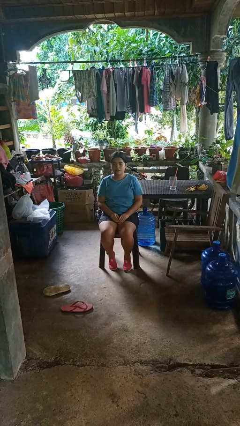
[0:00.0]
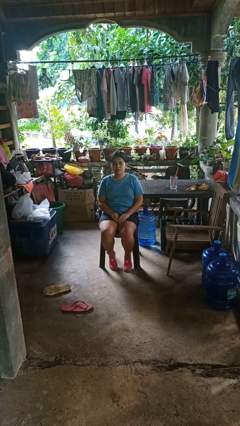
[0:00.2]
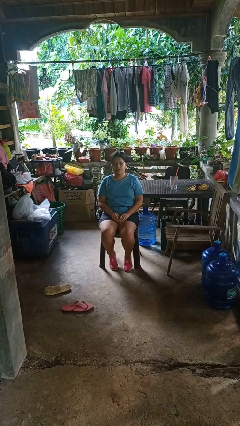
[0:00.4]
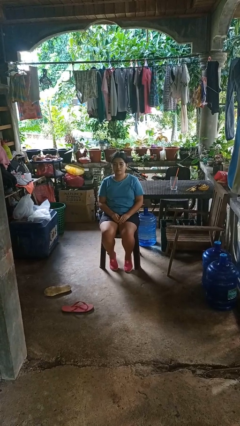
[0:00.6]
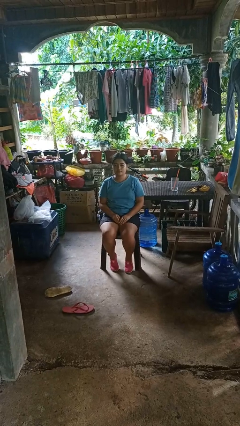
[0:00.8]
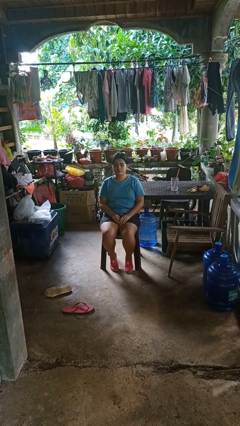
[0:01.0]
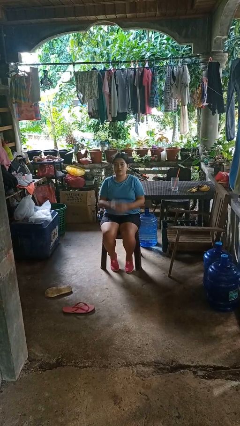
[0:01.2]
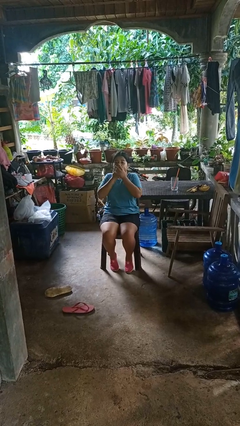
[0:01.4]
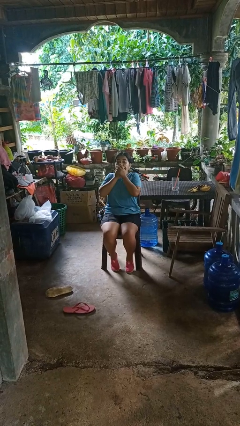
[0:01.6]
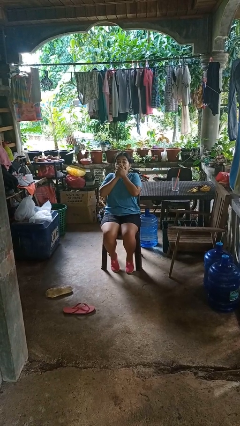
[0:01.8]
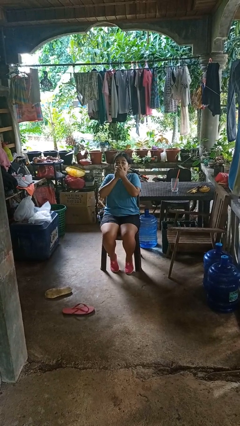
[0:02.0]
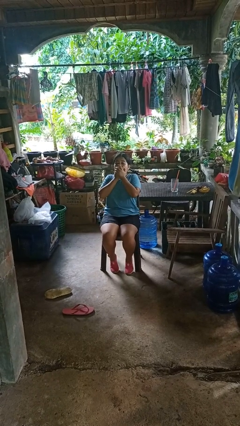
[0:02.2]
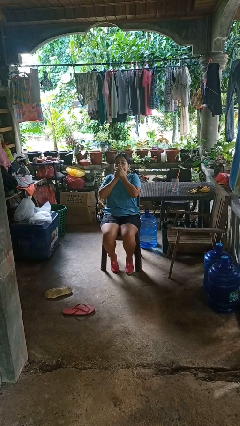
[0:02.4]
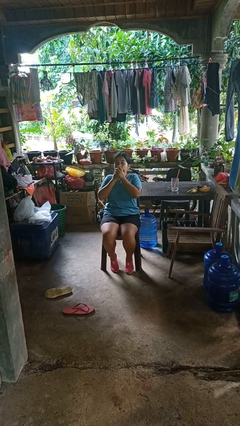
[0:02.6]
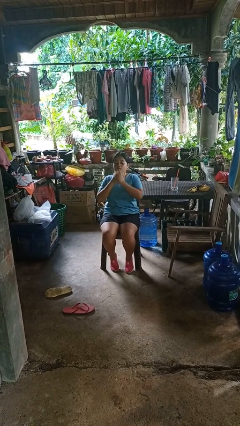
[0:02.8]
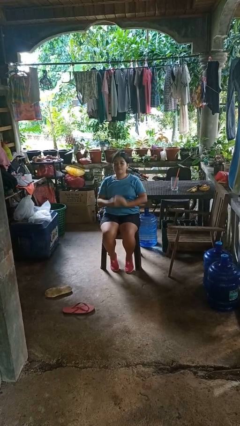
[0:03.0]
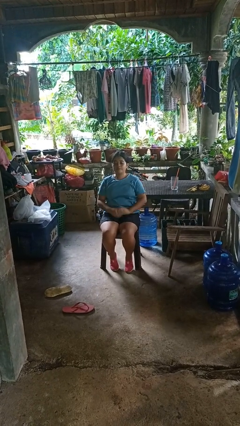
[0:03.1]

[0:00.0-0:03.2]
person covers face with hands

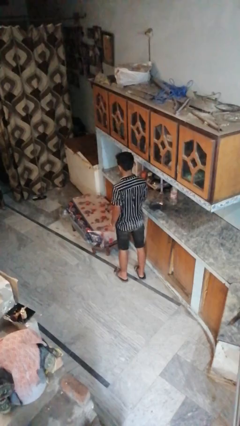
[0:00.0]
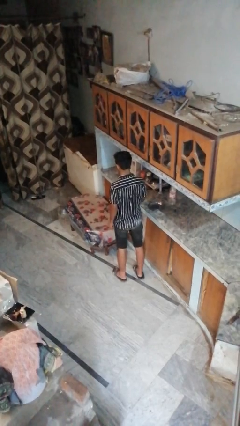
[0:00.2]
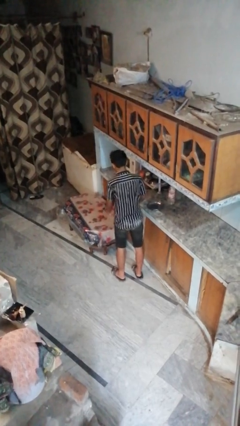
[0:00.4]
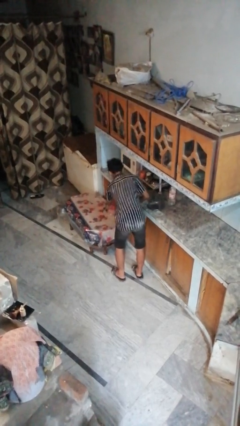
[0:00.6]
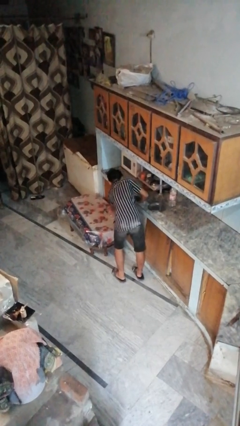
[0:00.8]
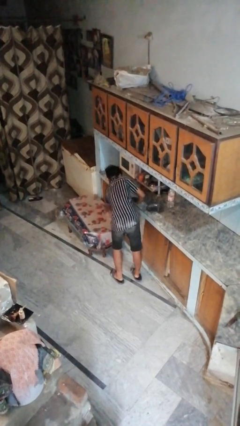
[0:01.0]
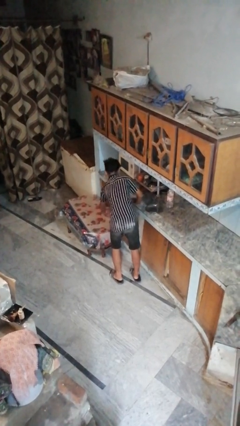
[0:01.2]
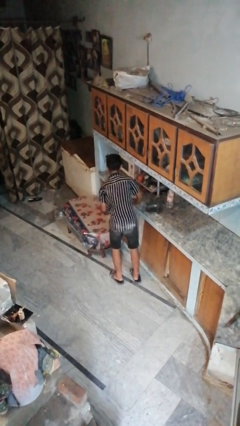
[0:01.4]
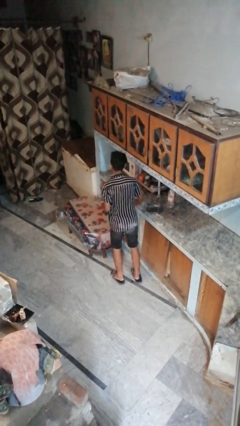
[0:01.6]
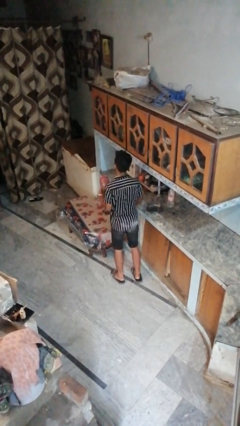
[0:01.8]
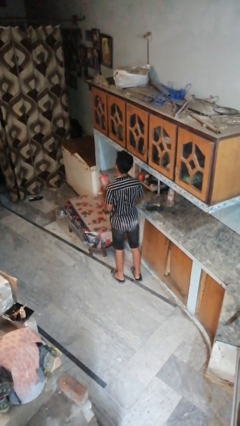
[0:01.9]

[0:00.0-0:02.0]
person picks up object from table

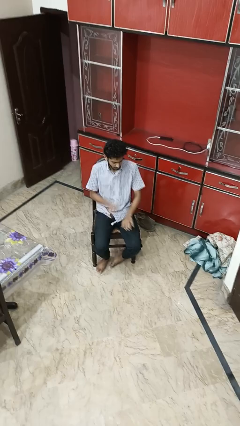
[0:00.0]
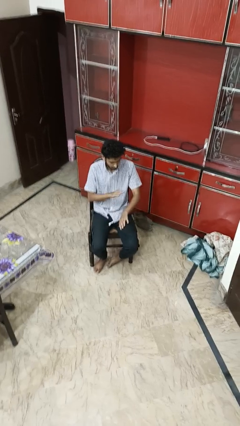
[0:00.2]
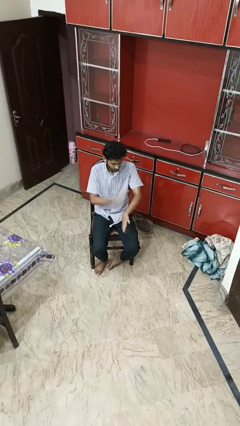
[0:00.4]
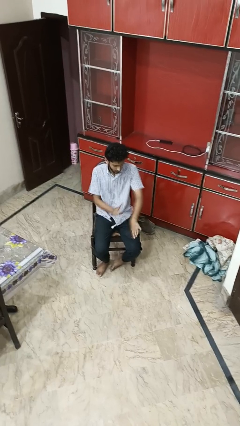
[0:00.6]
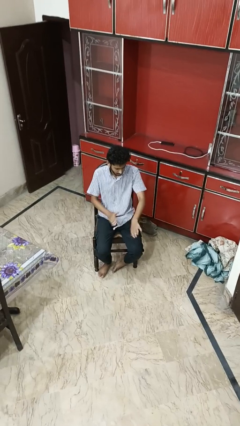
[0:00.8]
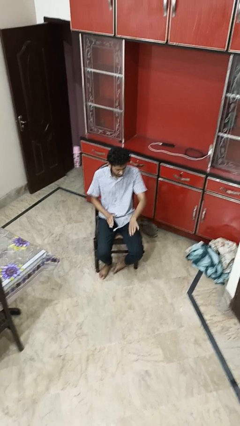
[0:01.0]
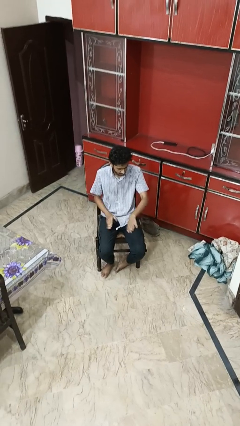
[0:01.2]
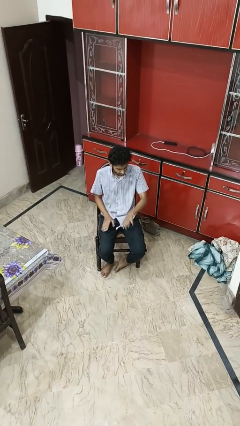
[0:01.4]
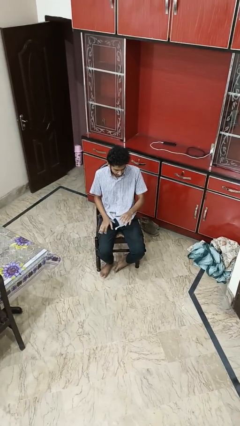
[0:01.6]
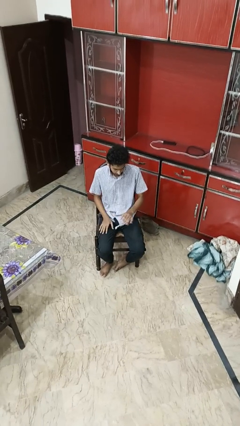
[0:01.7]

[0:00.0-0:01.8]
person swats bug

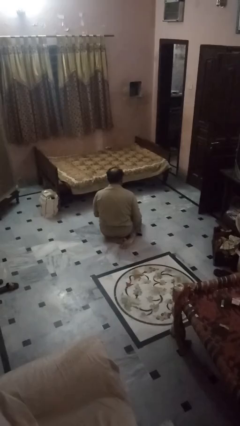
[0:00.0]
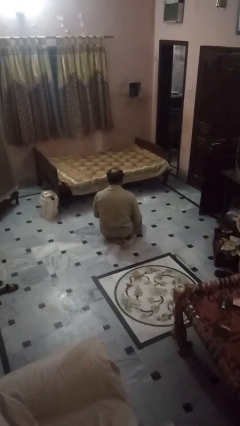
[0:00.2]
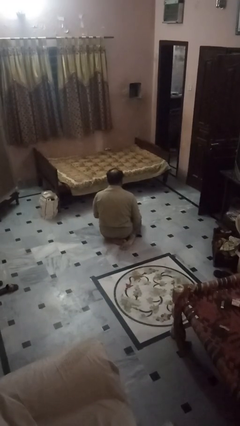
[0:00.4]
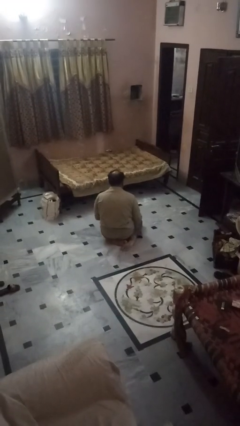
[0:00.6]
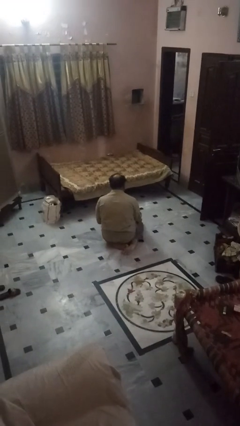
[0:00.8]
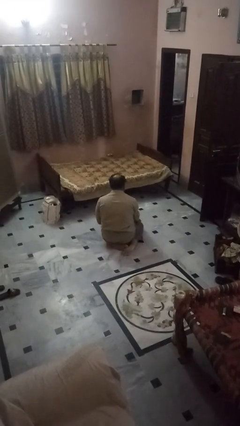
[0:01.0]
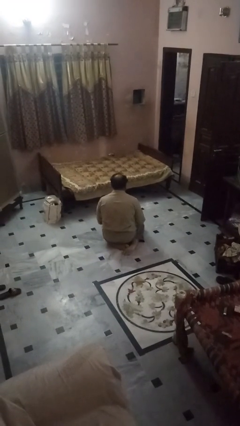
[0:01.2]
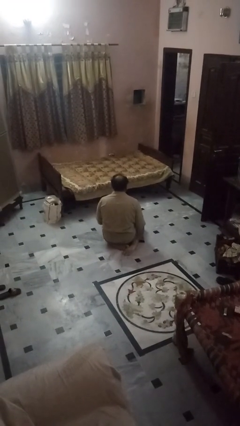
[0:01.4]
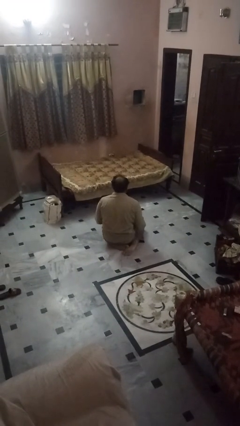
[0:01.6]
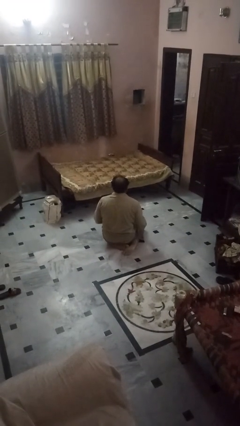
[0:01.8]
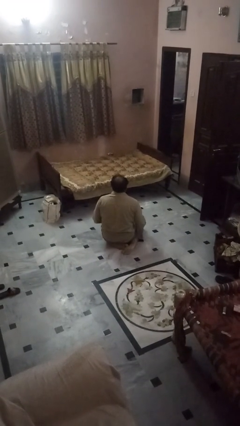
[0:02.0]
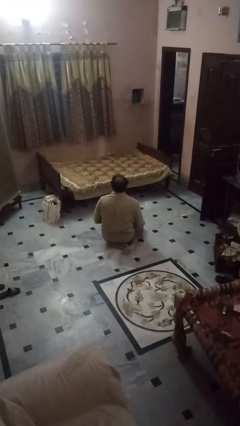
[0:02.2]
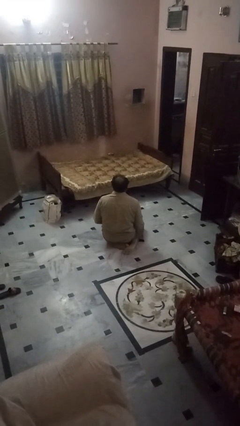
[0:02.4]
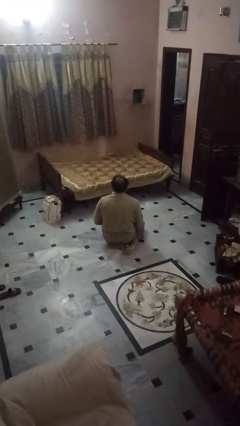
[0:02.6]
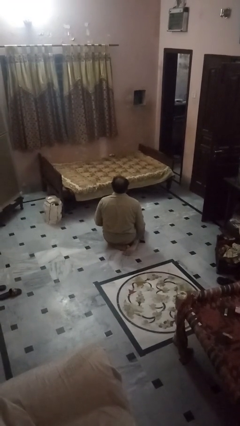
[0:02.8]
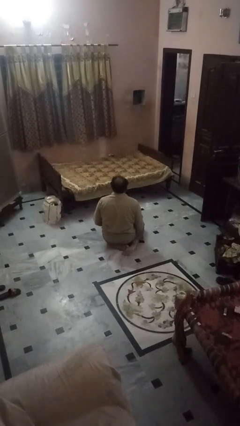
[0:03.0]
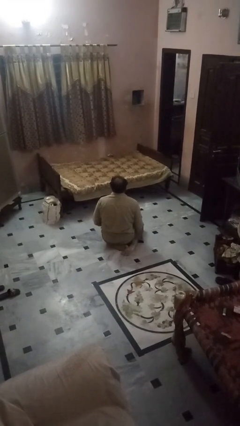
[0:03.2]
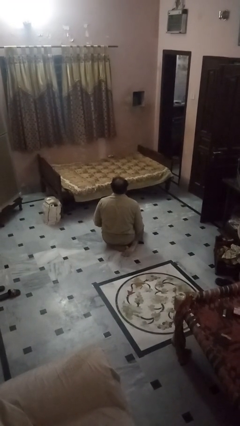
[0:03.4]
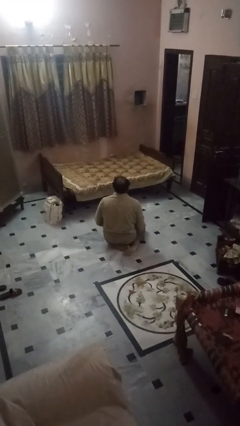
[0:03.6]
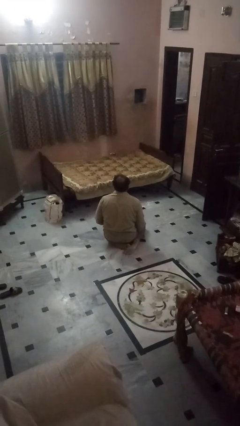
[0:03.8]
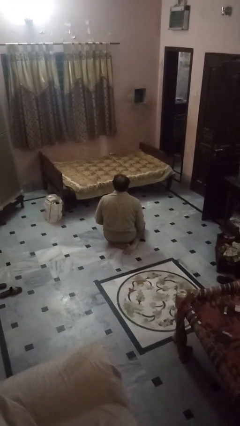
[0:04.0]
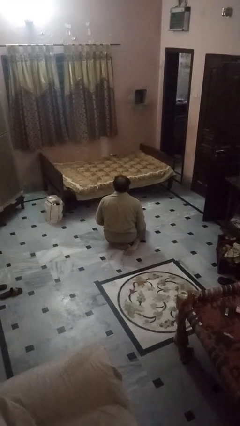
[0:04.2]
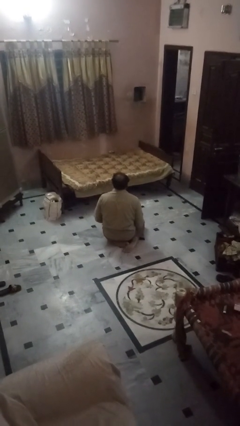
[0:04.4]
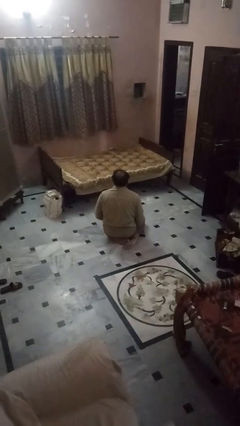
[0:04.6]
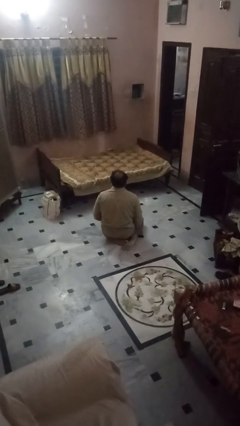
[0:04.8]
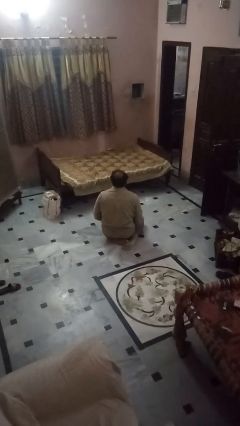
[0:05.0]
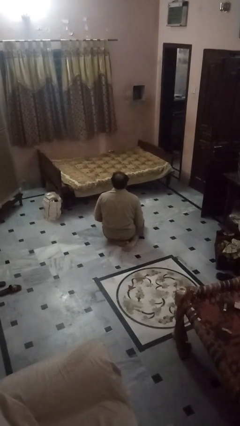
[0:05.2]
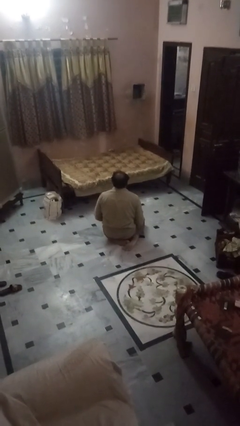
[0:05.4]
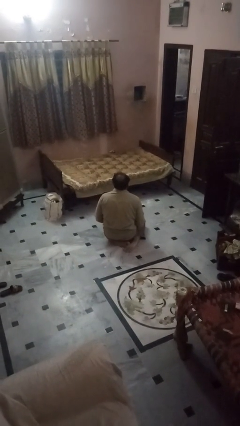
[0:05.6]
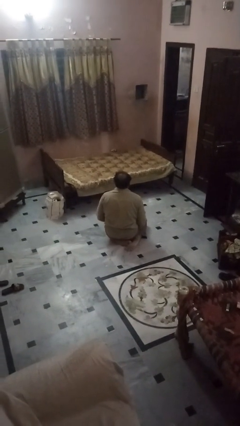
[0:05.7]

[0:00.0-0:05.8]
person picks up object from floor

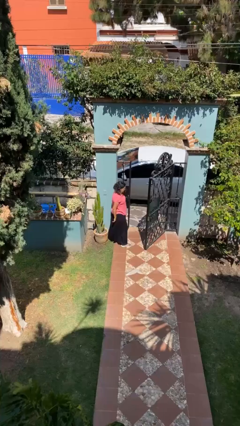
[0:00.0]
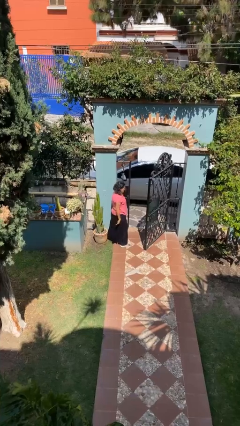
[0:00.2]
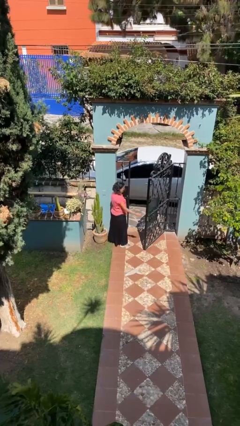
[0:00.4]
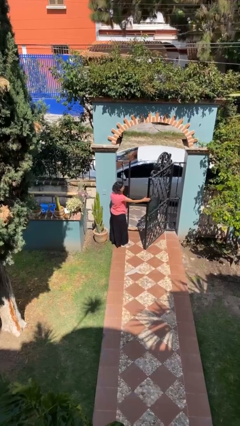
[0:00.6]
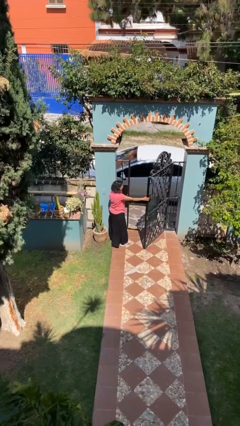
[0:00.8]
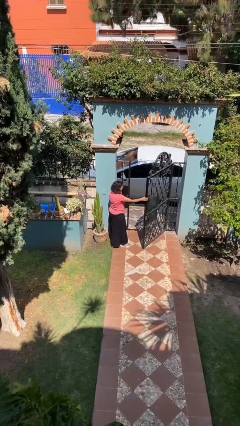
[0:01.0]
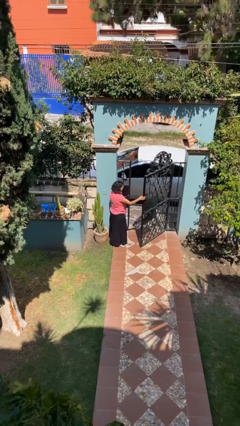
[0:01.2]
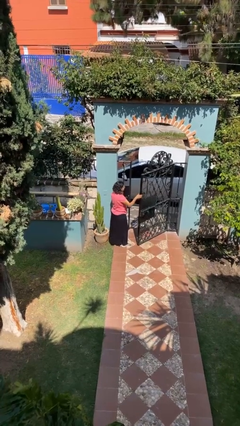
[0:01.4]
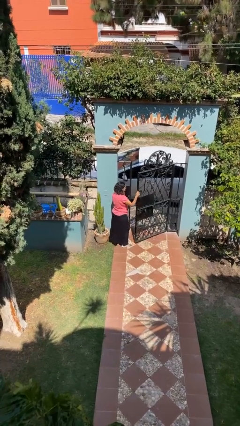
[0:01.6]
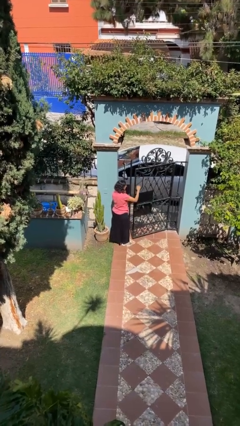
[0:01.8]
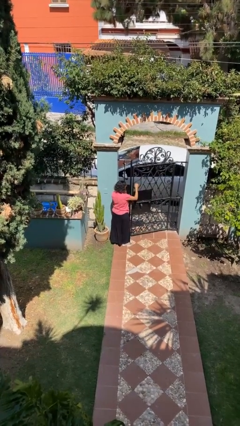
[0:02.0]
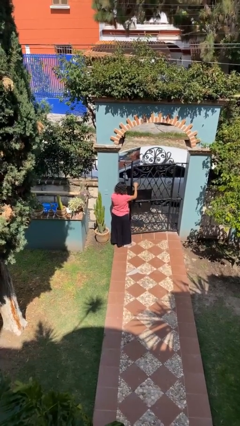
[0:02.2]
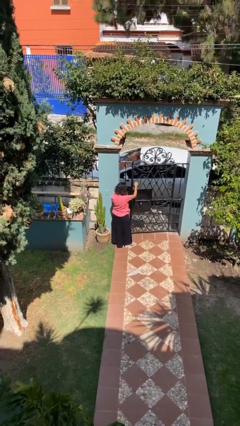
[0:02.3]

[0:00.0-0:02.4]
person closes facility door

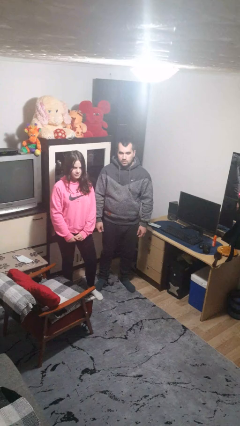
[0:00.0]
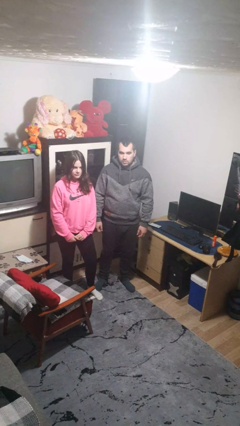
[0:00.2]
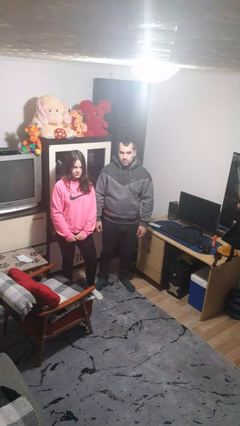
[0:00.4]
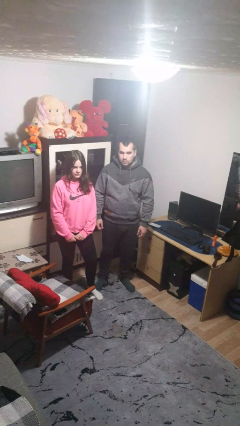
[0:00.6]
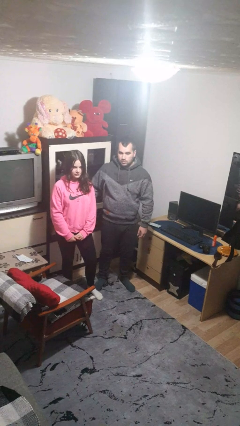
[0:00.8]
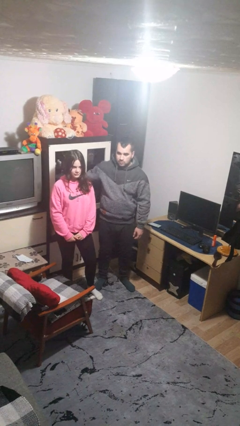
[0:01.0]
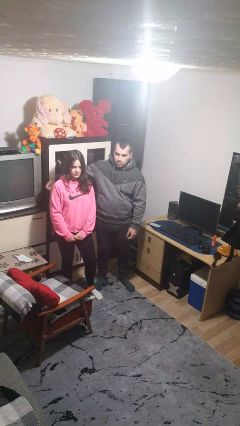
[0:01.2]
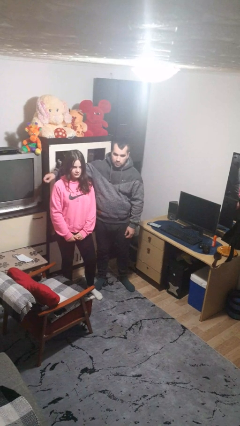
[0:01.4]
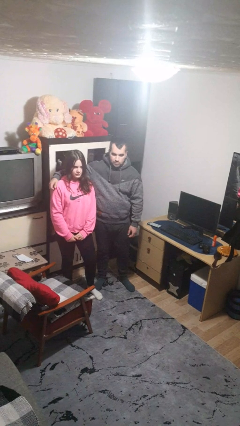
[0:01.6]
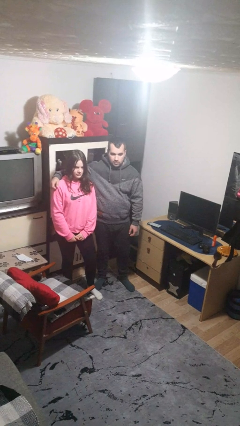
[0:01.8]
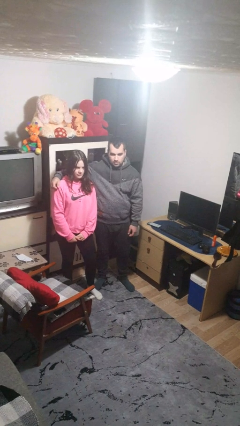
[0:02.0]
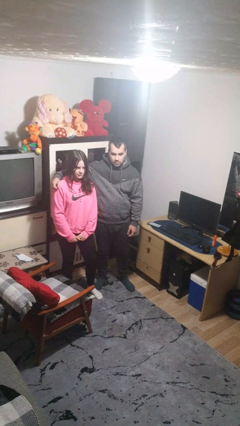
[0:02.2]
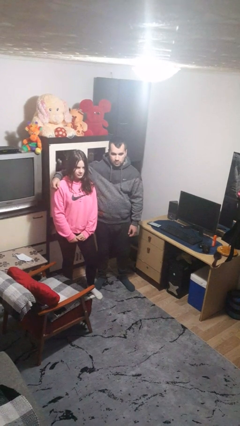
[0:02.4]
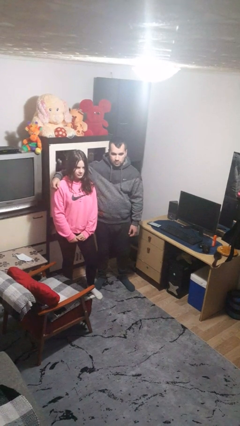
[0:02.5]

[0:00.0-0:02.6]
person hugs person from side
